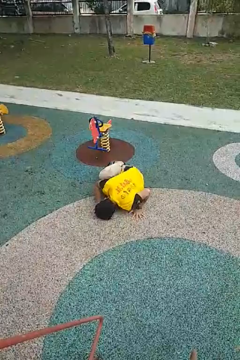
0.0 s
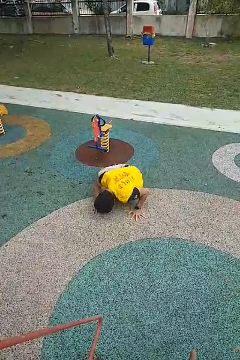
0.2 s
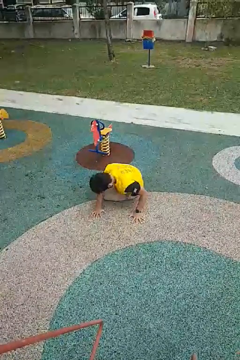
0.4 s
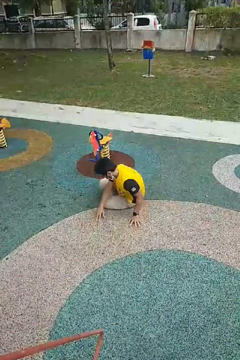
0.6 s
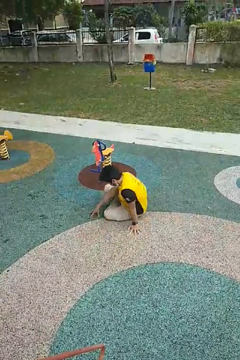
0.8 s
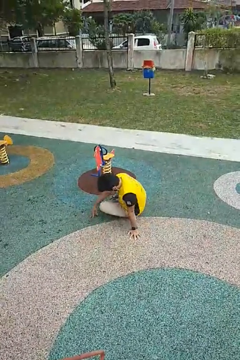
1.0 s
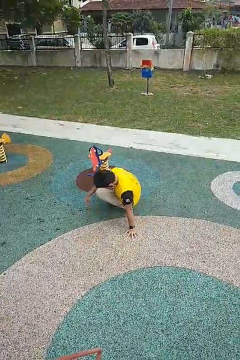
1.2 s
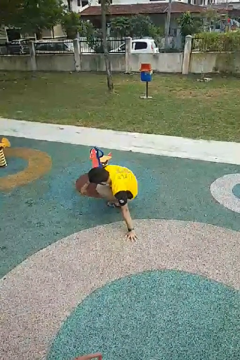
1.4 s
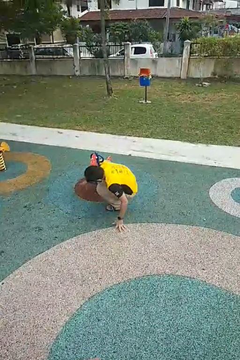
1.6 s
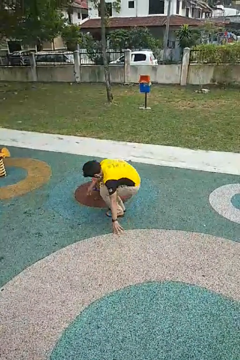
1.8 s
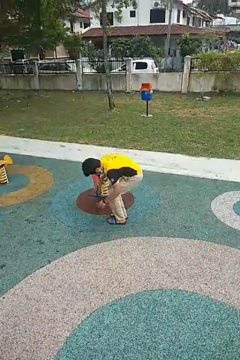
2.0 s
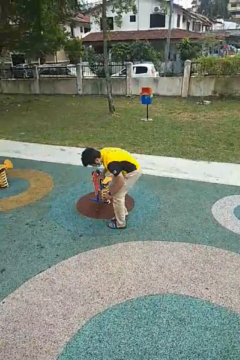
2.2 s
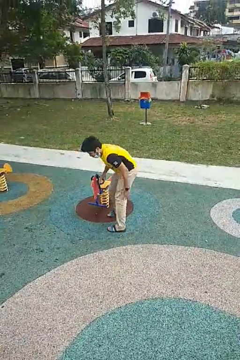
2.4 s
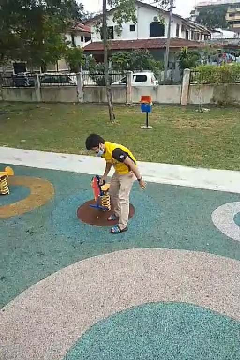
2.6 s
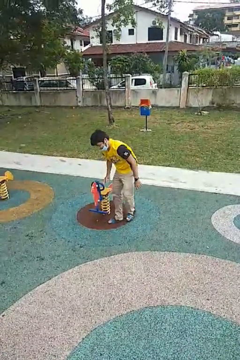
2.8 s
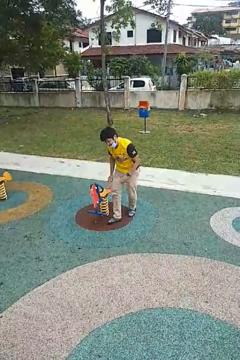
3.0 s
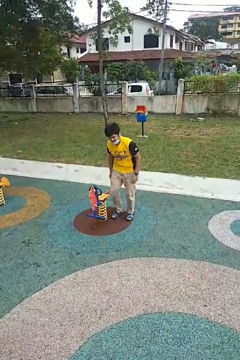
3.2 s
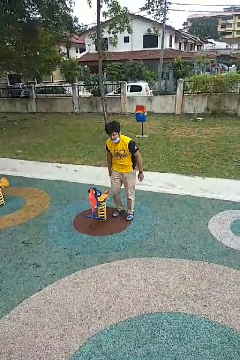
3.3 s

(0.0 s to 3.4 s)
person stands up from floor

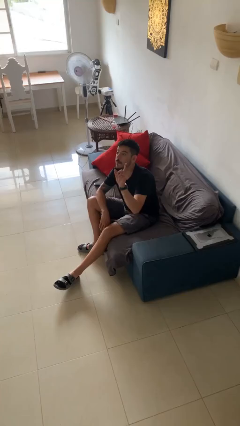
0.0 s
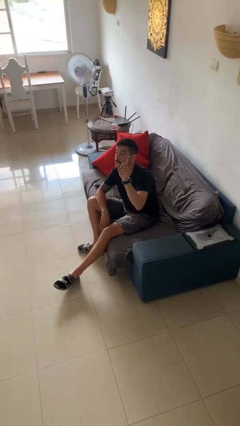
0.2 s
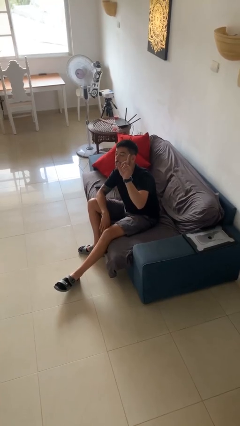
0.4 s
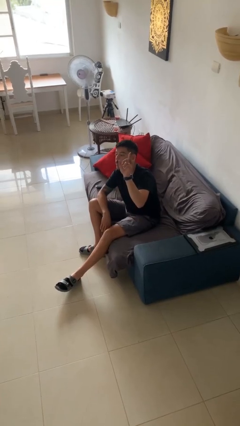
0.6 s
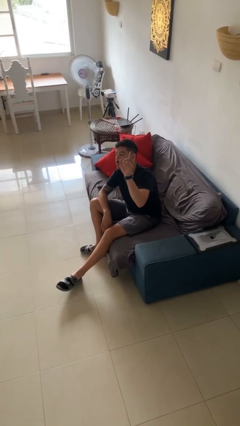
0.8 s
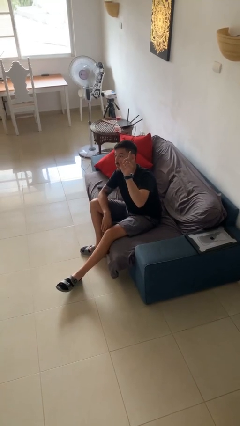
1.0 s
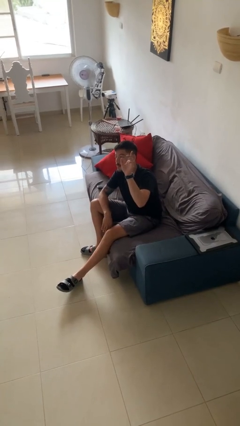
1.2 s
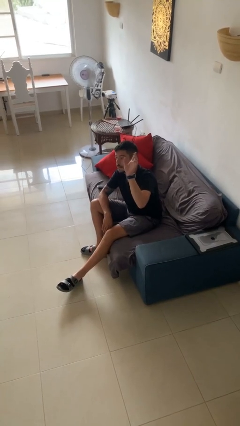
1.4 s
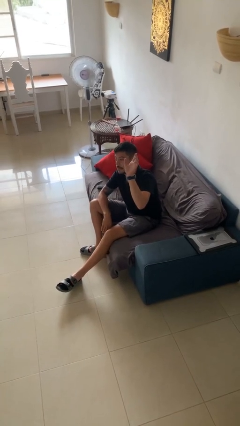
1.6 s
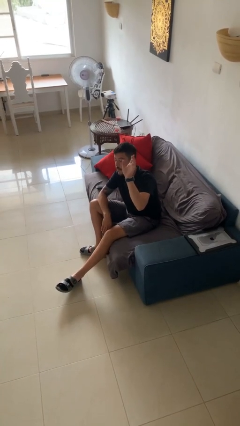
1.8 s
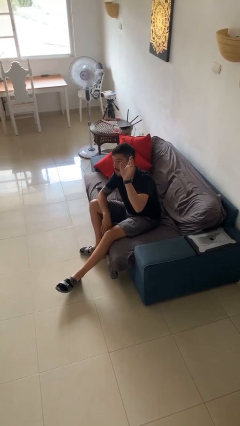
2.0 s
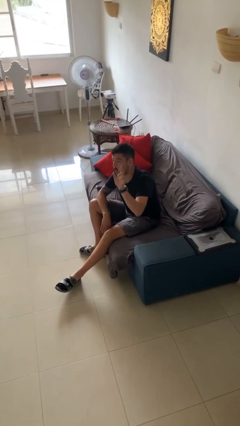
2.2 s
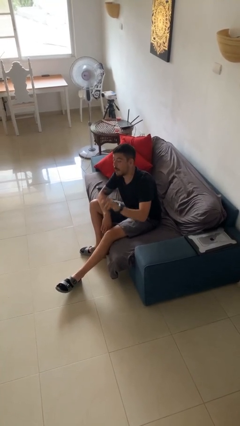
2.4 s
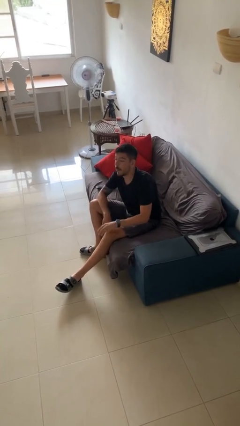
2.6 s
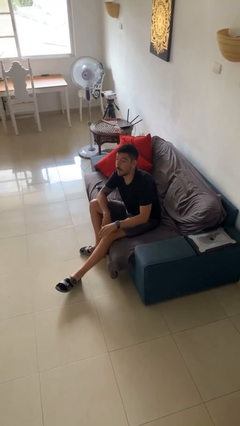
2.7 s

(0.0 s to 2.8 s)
person gestures raise hand

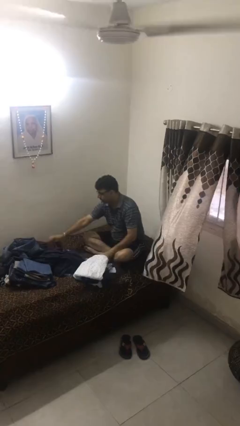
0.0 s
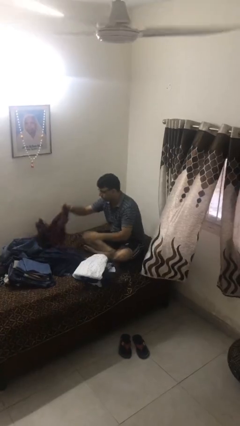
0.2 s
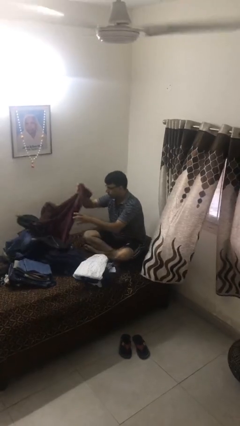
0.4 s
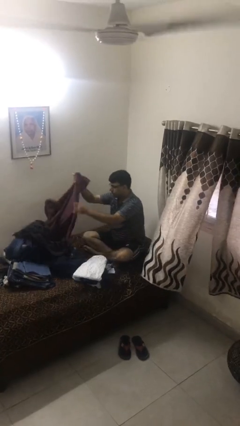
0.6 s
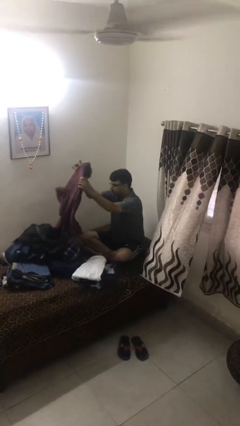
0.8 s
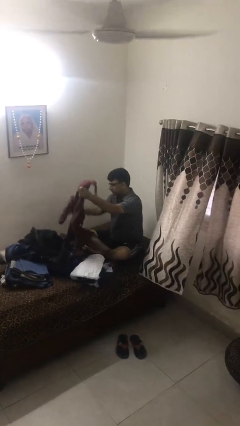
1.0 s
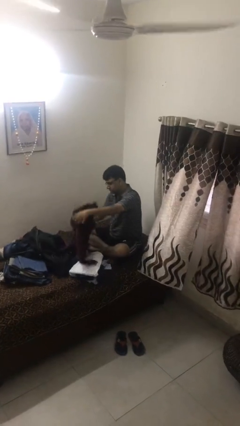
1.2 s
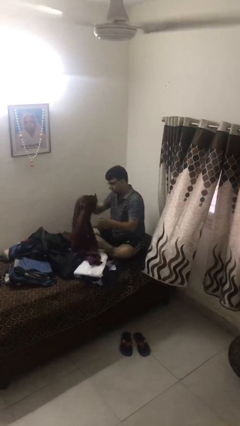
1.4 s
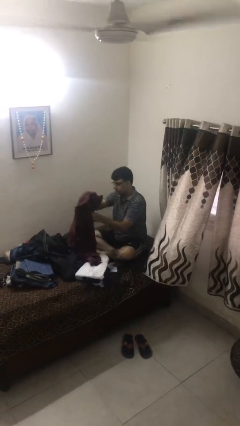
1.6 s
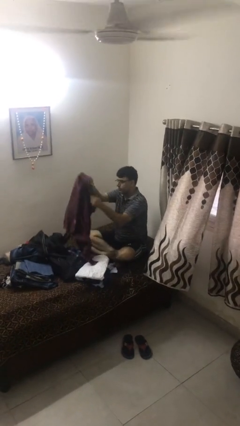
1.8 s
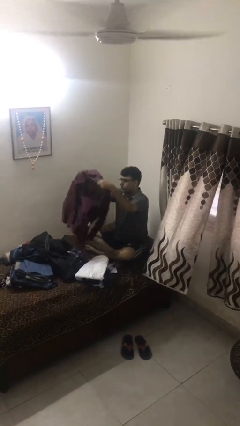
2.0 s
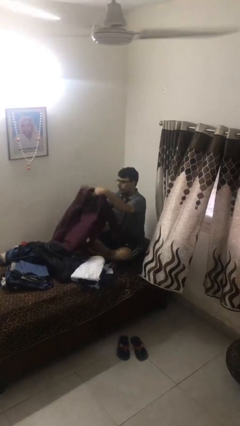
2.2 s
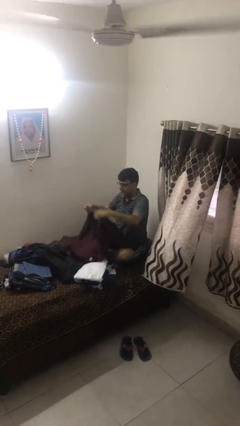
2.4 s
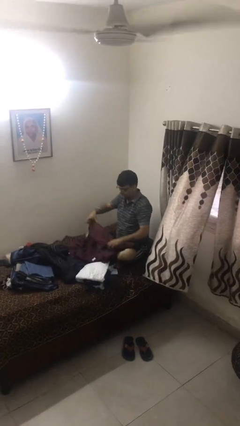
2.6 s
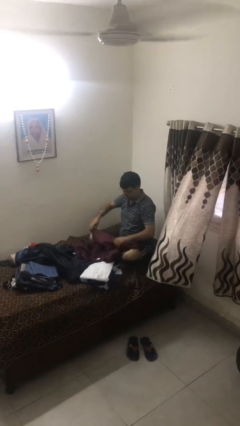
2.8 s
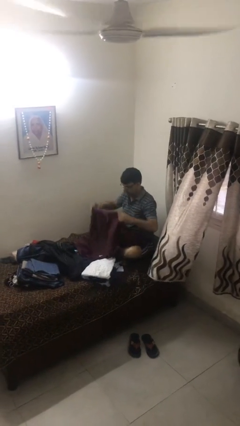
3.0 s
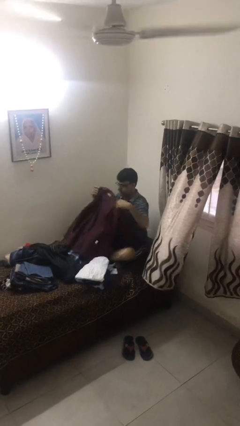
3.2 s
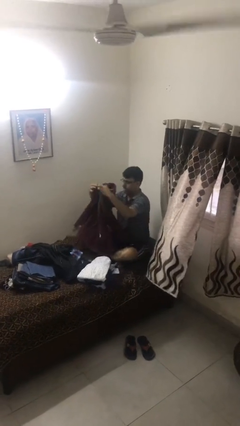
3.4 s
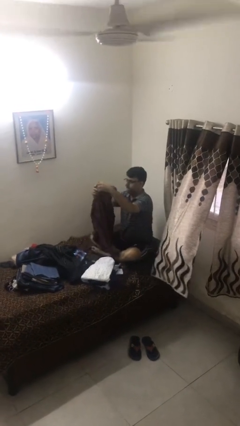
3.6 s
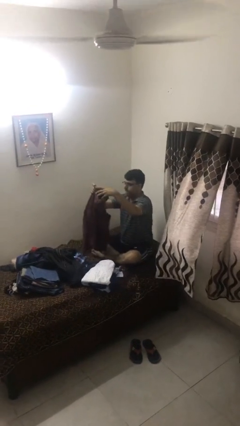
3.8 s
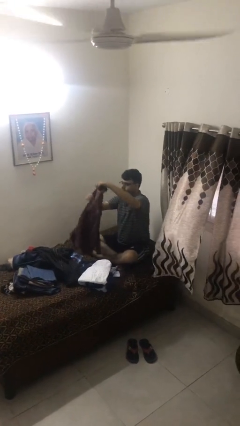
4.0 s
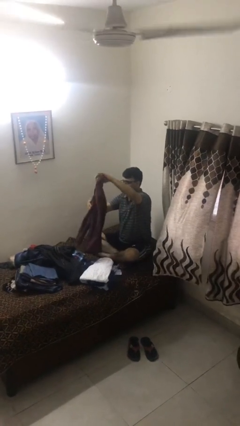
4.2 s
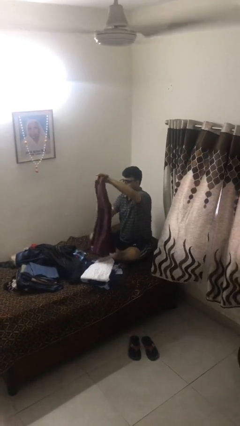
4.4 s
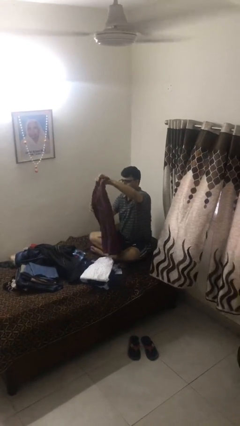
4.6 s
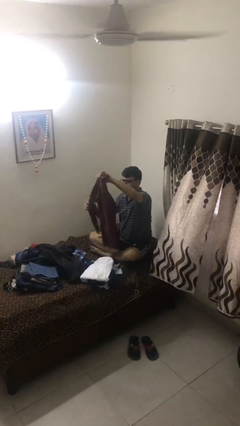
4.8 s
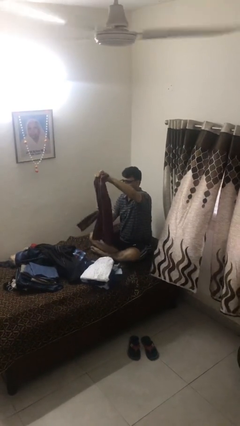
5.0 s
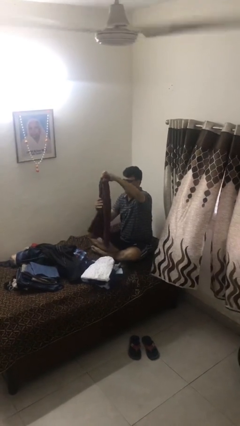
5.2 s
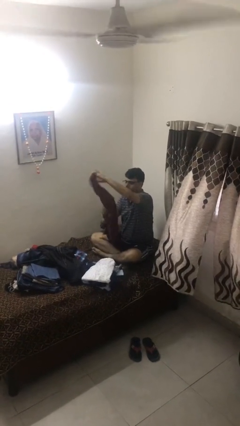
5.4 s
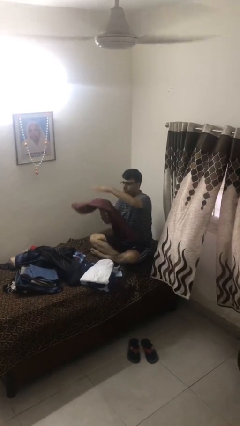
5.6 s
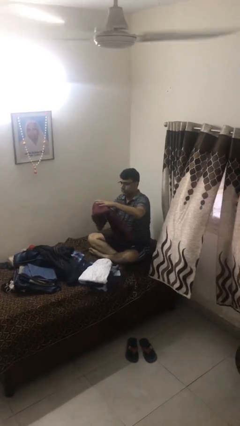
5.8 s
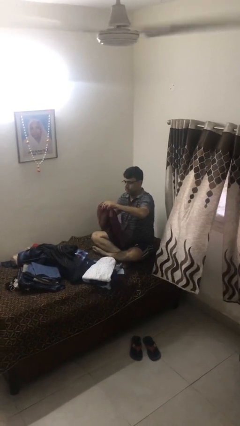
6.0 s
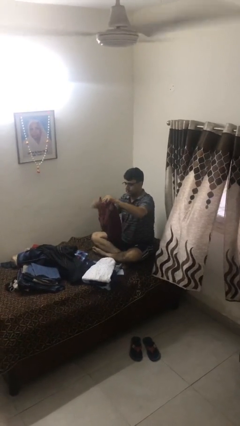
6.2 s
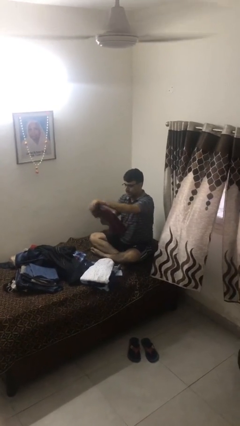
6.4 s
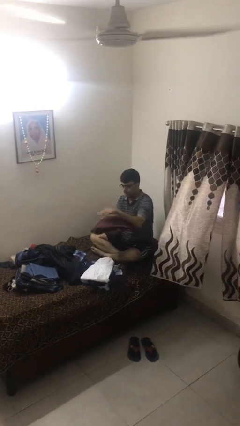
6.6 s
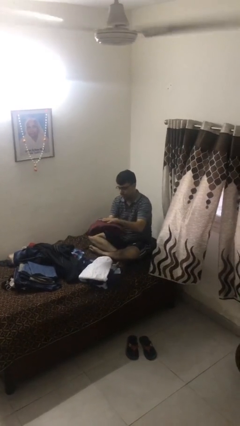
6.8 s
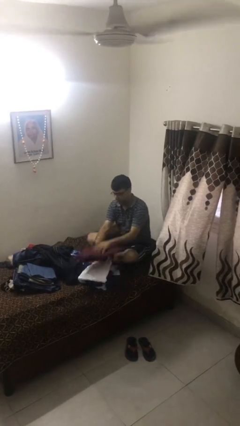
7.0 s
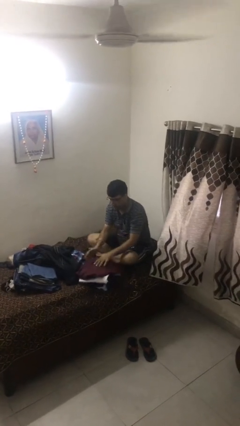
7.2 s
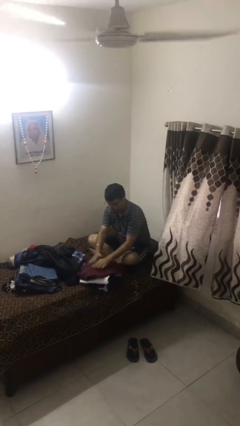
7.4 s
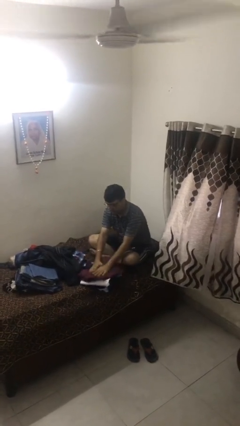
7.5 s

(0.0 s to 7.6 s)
person folds shirt

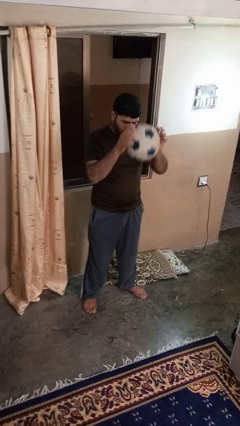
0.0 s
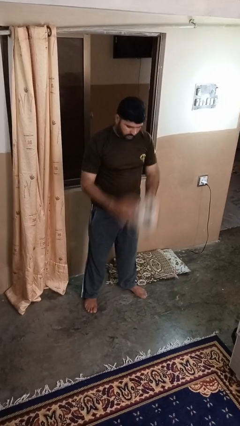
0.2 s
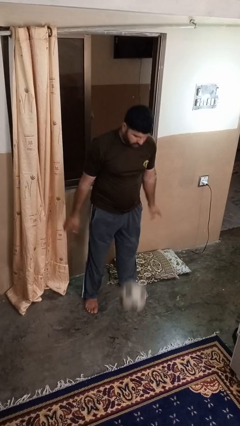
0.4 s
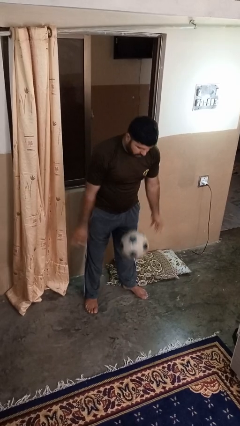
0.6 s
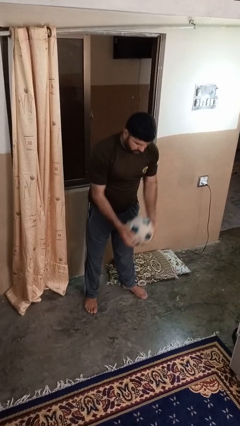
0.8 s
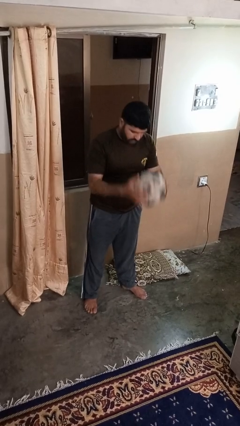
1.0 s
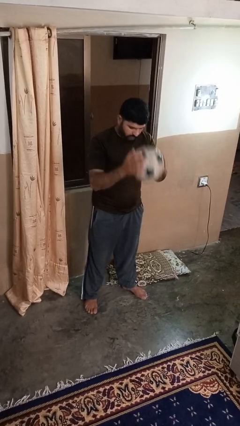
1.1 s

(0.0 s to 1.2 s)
person bounces ball on floor

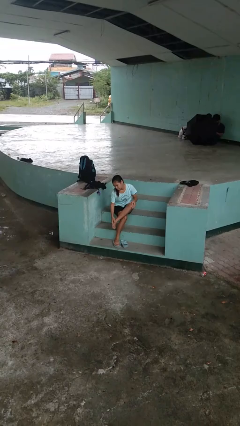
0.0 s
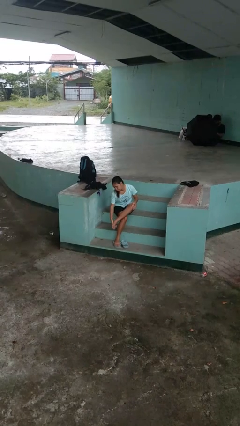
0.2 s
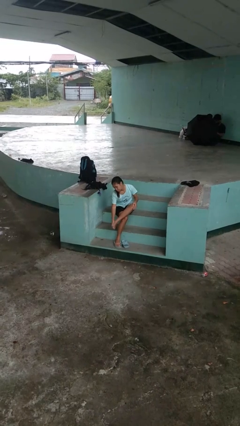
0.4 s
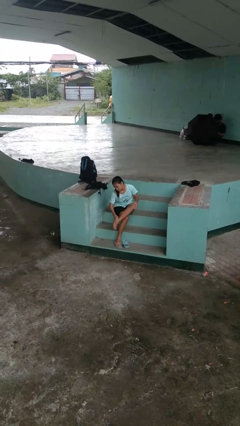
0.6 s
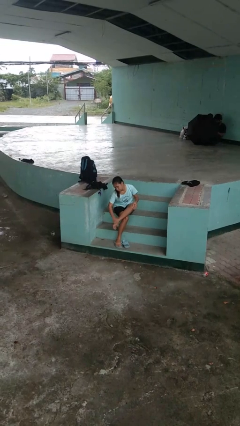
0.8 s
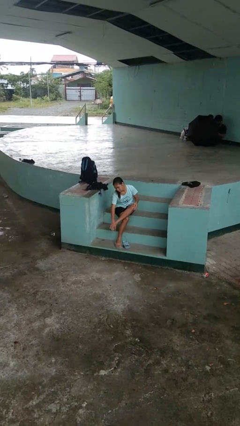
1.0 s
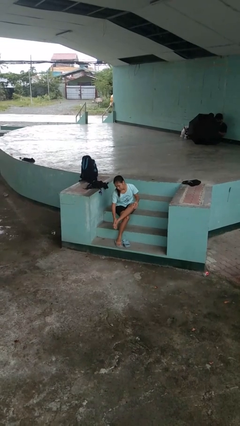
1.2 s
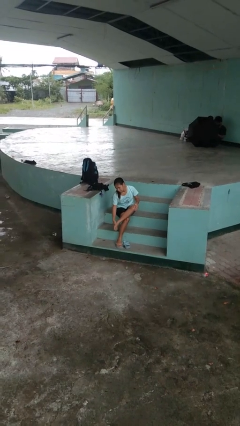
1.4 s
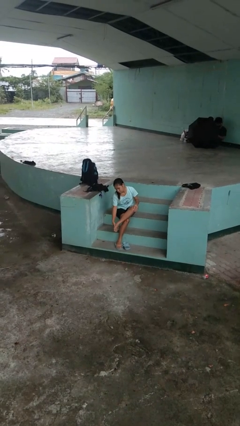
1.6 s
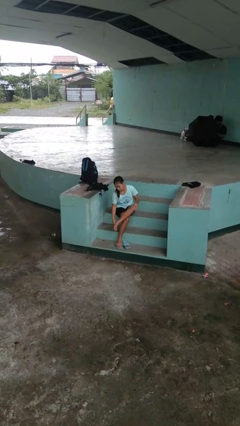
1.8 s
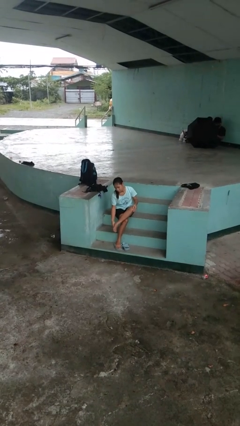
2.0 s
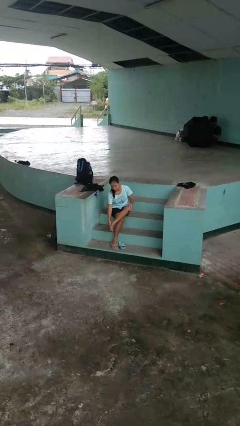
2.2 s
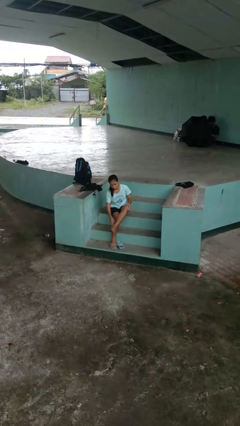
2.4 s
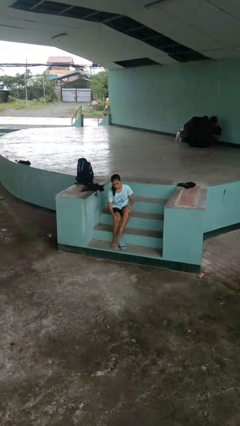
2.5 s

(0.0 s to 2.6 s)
person rubs foot

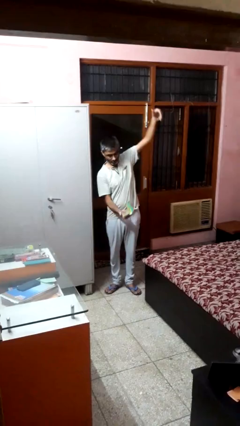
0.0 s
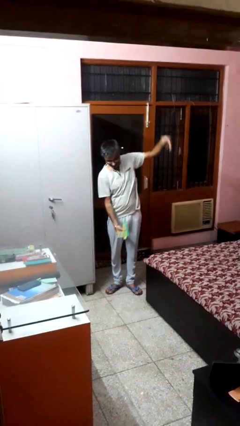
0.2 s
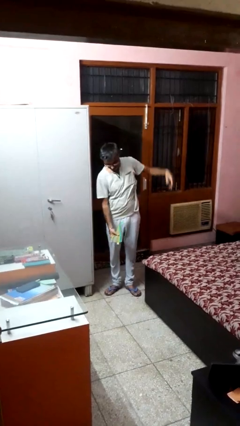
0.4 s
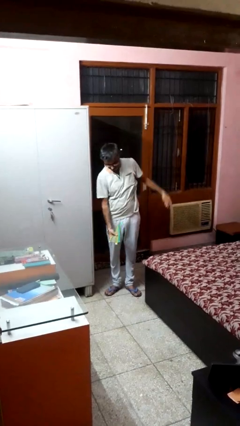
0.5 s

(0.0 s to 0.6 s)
person catches dropped object

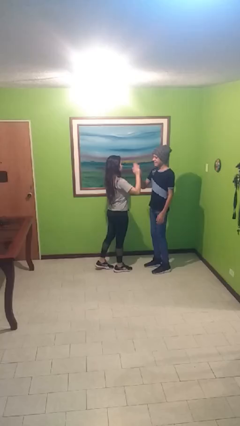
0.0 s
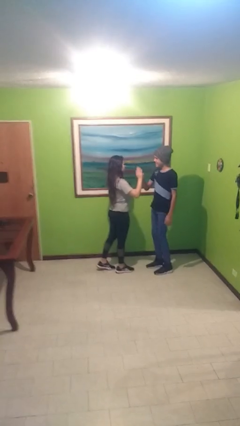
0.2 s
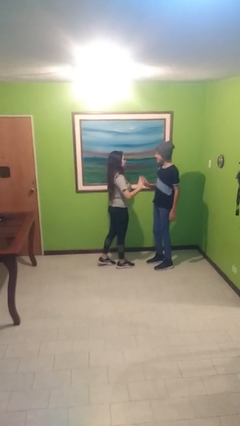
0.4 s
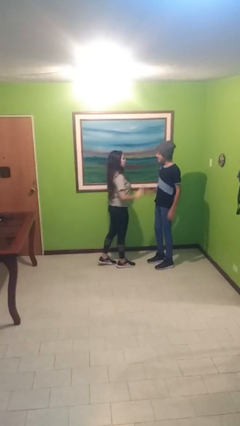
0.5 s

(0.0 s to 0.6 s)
person highfives hand
